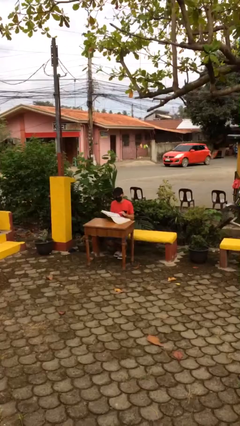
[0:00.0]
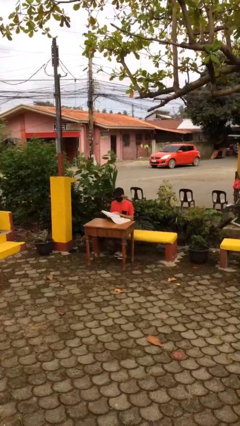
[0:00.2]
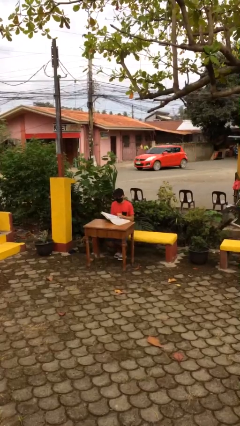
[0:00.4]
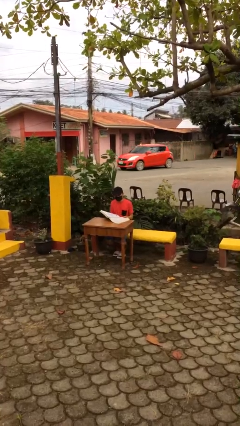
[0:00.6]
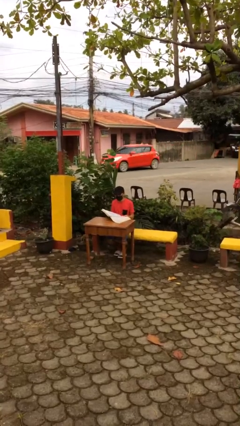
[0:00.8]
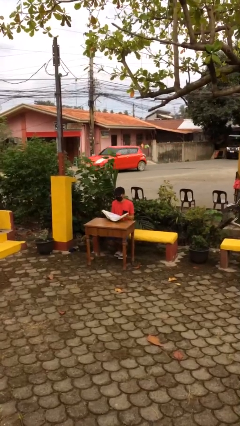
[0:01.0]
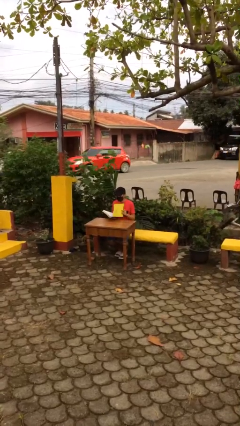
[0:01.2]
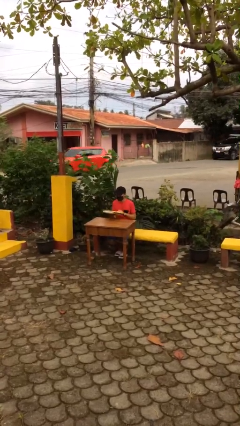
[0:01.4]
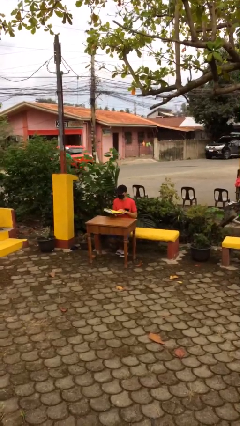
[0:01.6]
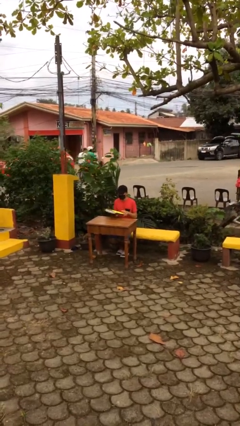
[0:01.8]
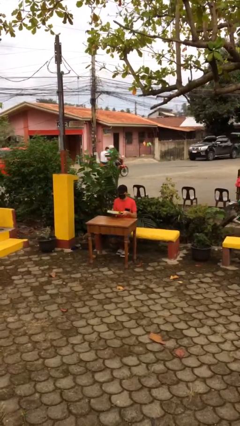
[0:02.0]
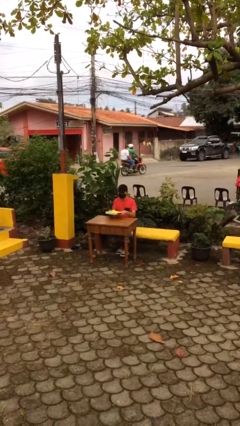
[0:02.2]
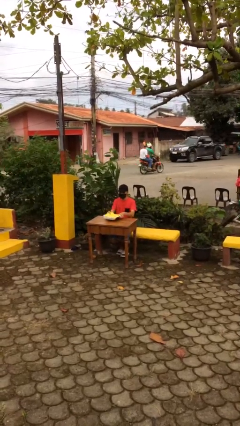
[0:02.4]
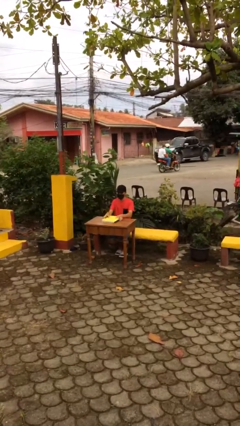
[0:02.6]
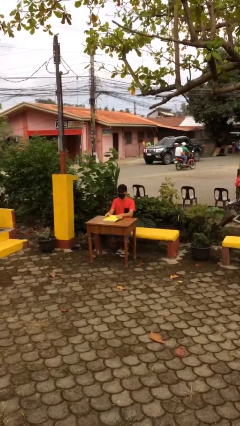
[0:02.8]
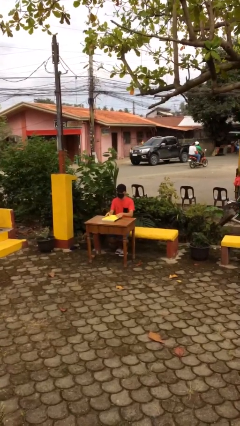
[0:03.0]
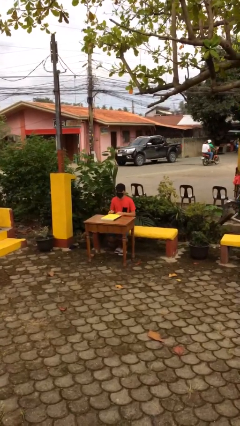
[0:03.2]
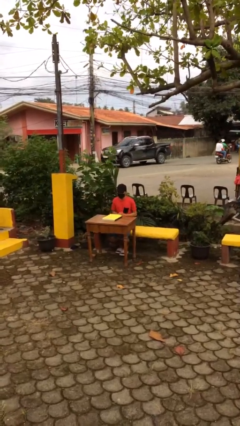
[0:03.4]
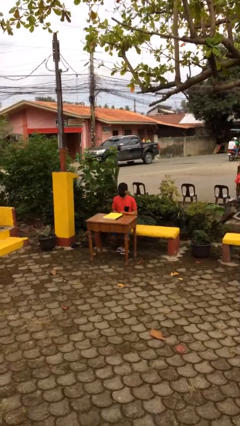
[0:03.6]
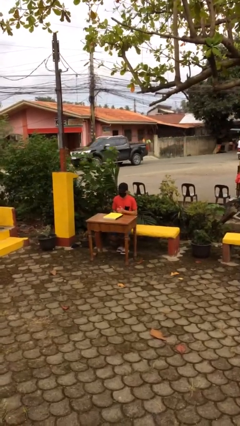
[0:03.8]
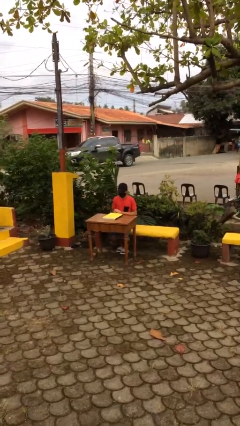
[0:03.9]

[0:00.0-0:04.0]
person puts down object on table

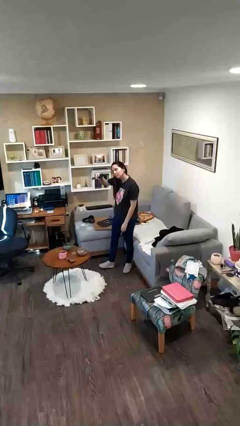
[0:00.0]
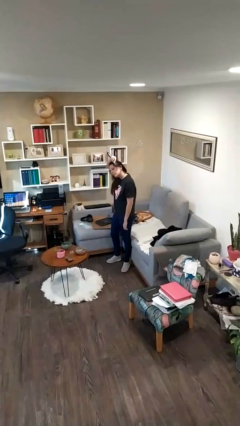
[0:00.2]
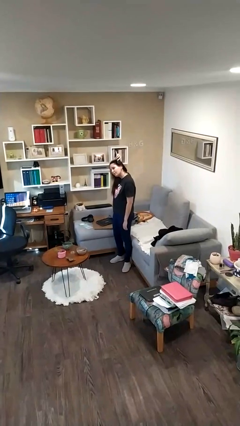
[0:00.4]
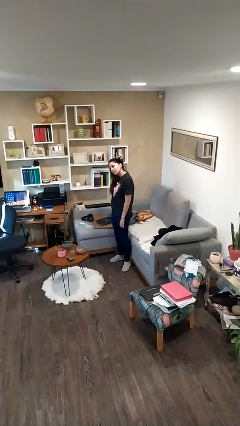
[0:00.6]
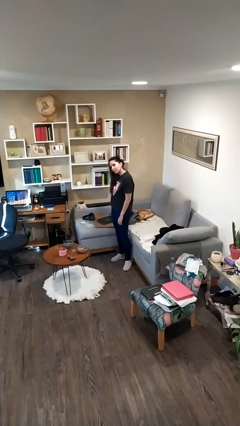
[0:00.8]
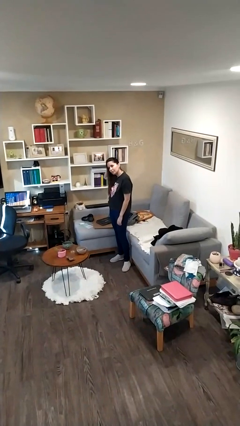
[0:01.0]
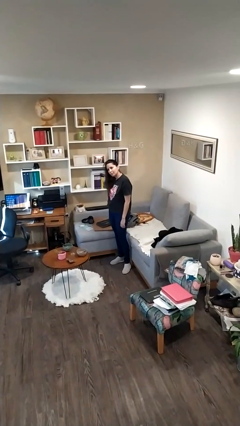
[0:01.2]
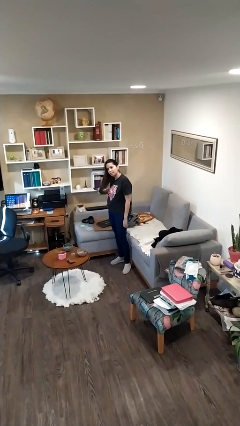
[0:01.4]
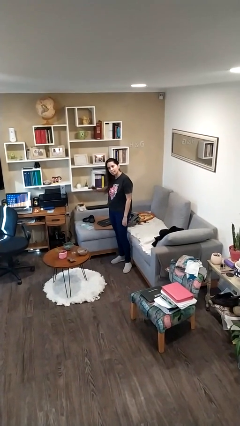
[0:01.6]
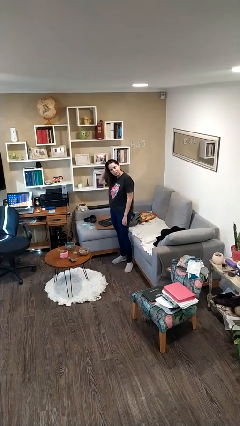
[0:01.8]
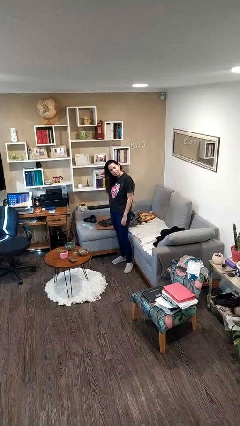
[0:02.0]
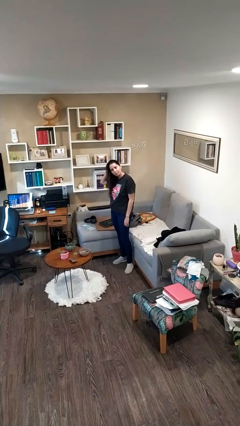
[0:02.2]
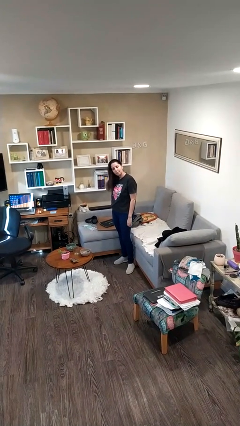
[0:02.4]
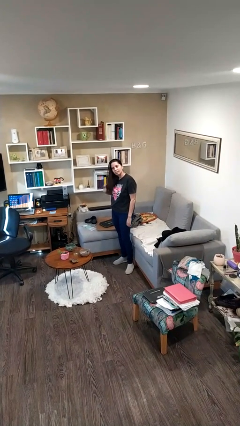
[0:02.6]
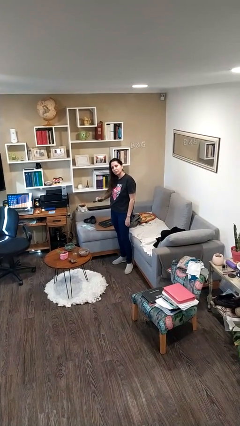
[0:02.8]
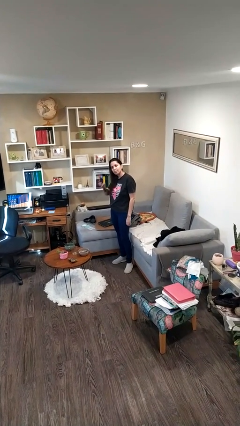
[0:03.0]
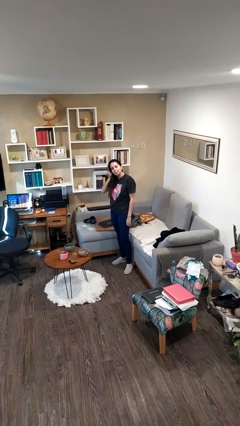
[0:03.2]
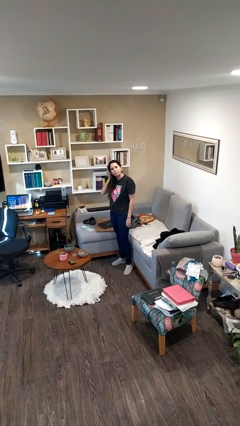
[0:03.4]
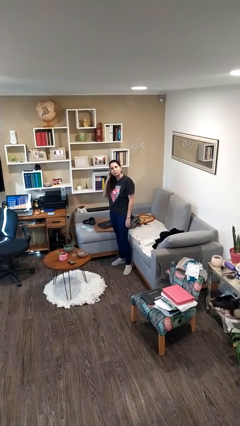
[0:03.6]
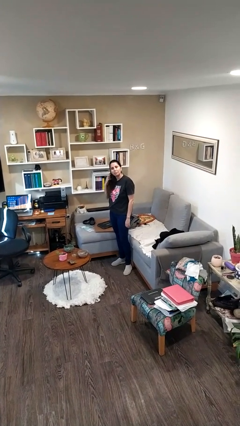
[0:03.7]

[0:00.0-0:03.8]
person brushes hair

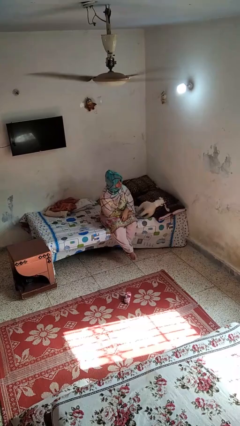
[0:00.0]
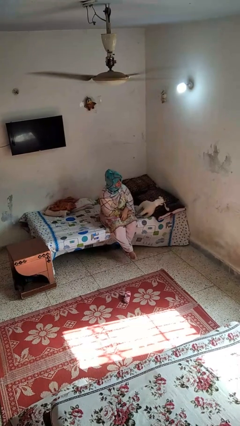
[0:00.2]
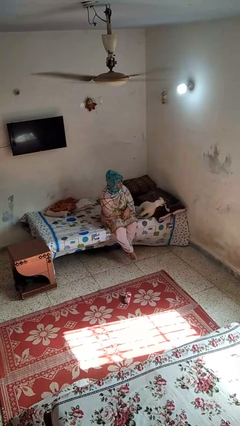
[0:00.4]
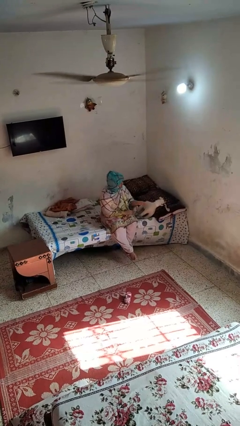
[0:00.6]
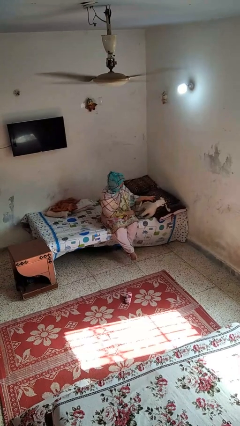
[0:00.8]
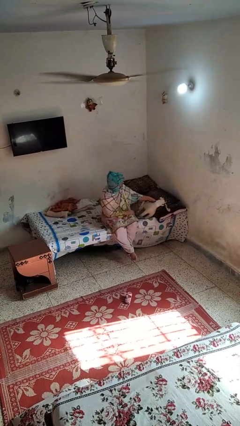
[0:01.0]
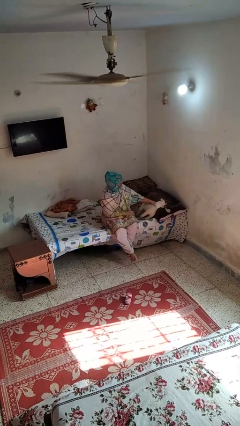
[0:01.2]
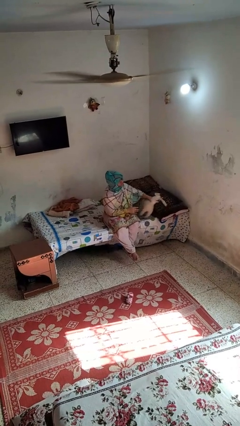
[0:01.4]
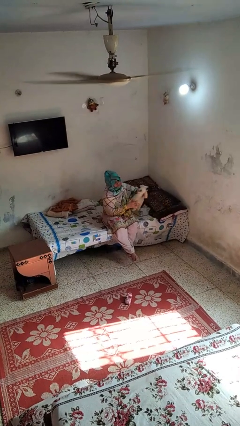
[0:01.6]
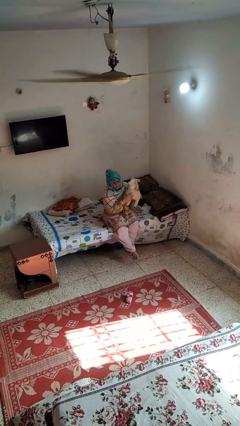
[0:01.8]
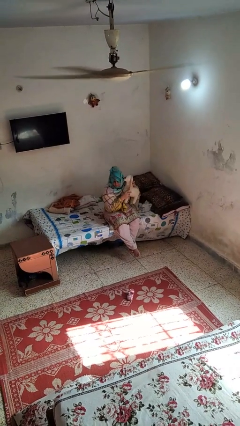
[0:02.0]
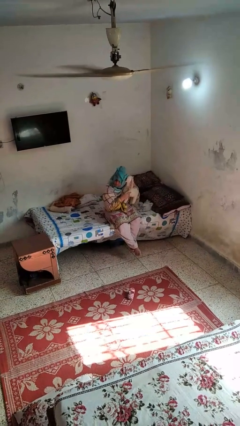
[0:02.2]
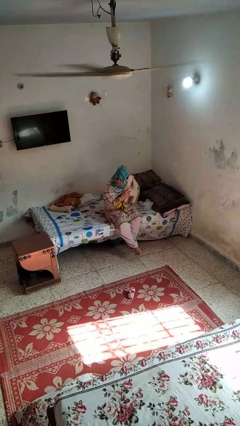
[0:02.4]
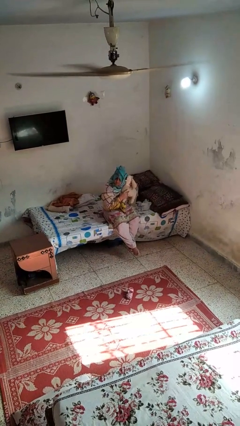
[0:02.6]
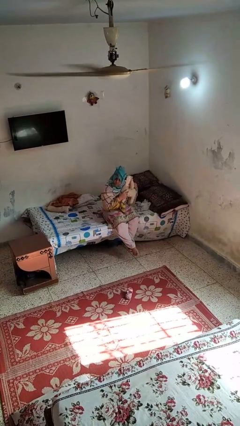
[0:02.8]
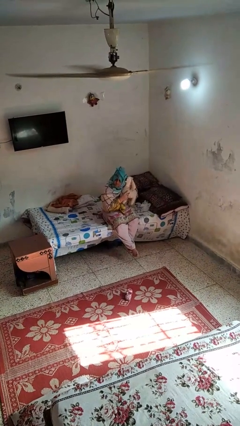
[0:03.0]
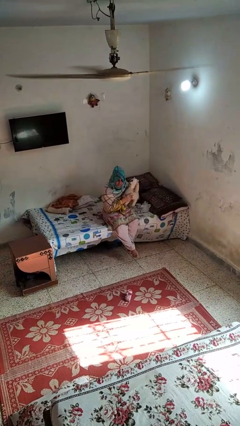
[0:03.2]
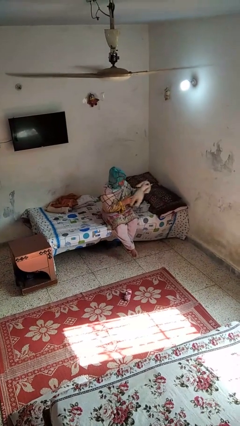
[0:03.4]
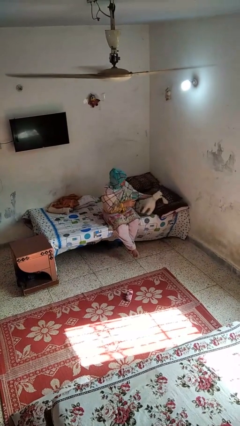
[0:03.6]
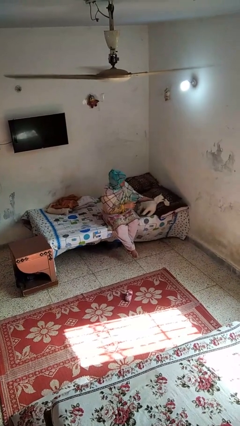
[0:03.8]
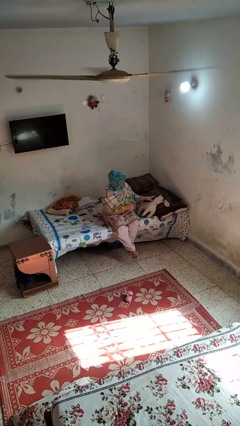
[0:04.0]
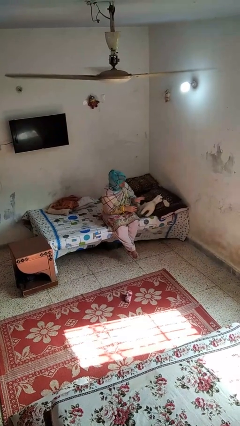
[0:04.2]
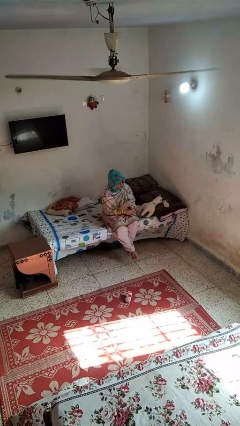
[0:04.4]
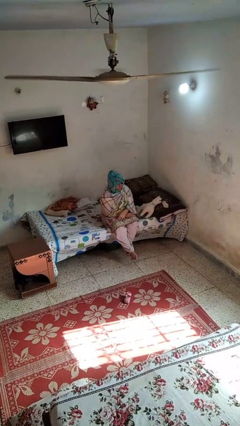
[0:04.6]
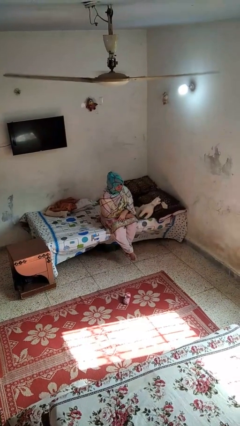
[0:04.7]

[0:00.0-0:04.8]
person hugs stuffed animal

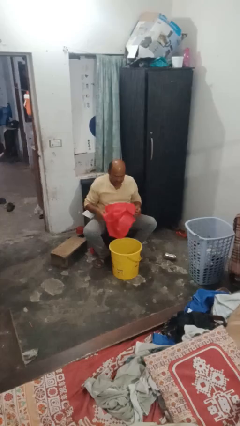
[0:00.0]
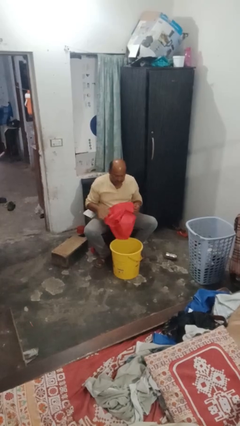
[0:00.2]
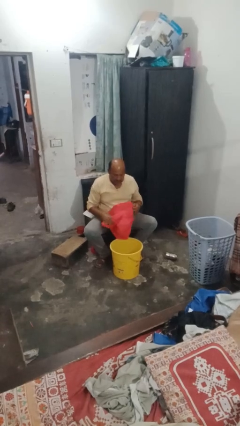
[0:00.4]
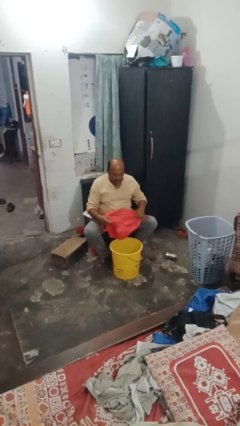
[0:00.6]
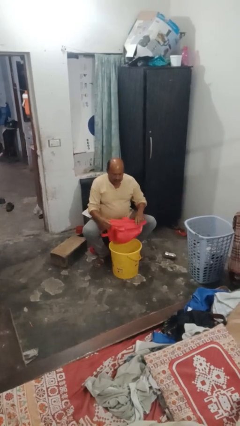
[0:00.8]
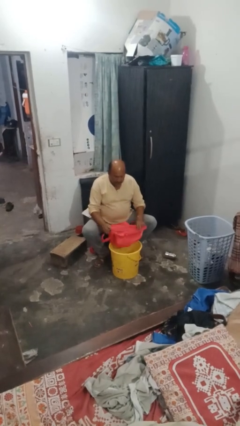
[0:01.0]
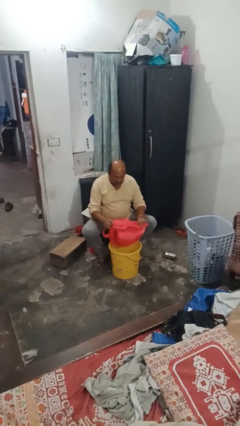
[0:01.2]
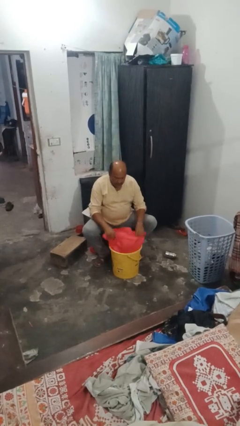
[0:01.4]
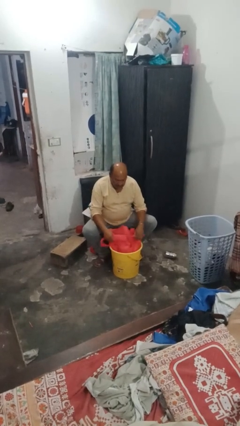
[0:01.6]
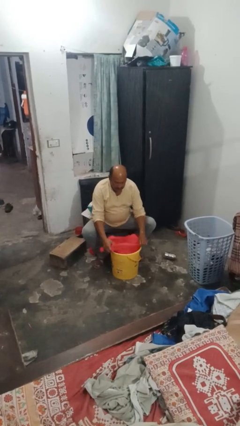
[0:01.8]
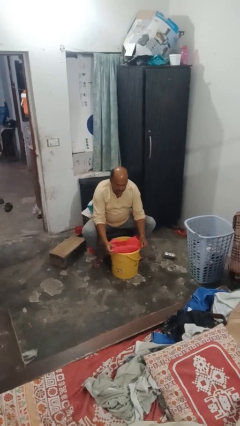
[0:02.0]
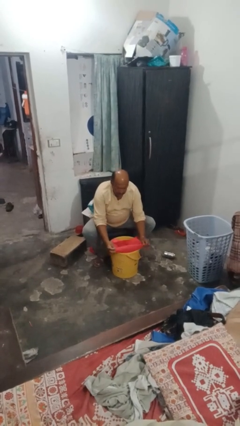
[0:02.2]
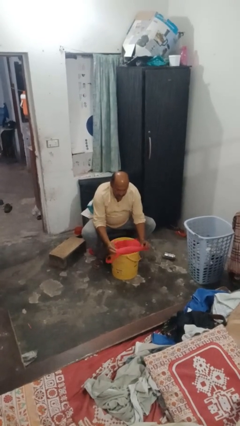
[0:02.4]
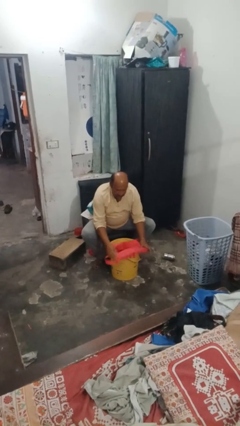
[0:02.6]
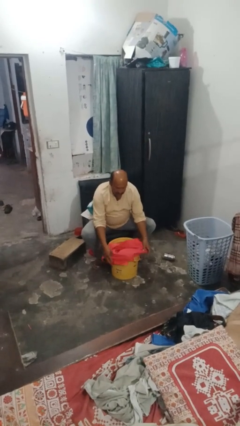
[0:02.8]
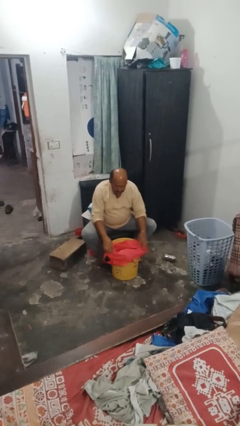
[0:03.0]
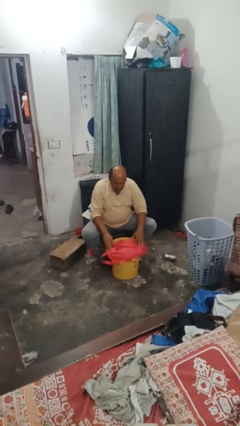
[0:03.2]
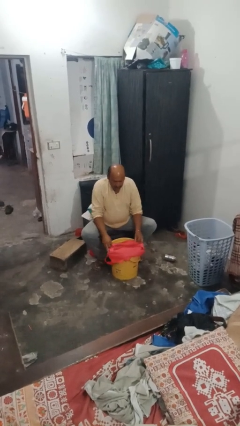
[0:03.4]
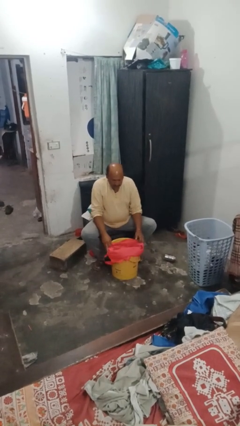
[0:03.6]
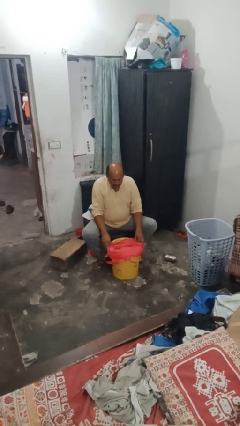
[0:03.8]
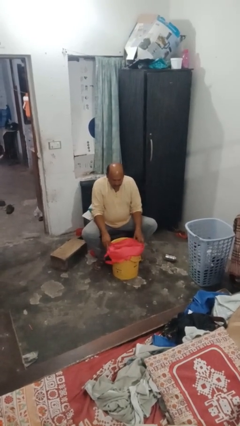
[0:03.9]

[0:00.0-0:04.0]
person inserts trashbag into trashcan

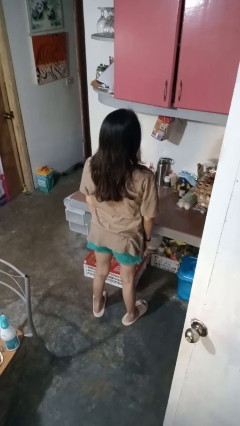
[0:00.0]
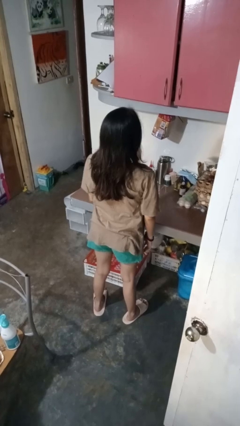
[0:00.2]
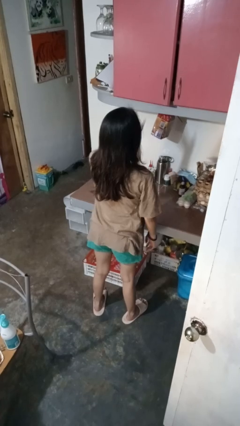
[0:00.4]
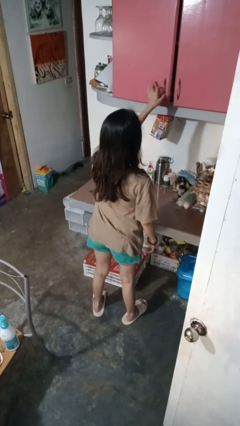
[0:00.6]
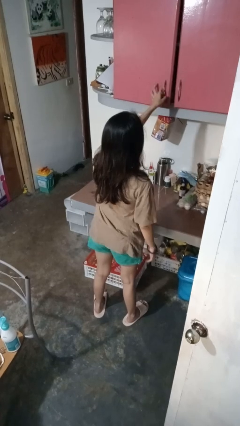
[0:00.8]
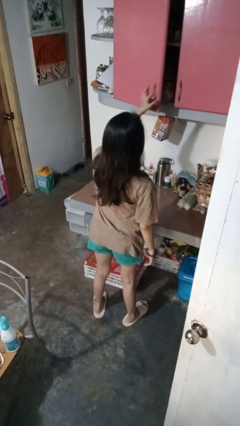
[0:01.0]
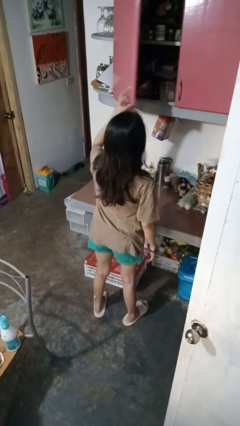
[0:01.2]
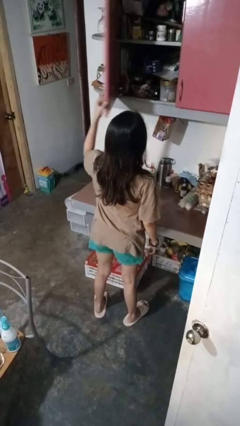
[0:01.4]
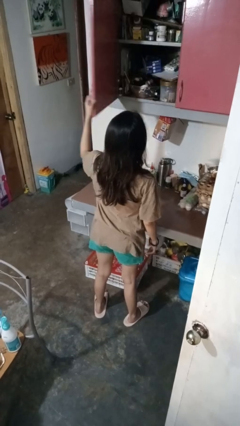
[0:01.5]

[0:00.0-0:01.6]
person opens cabinet
